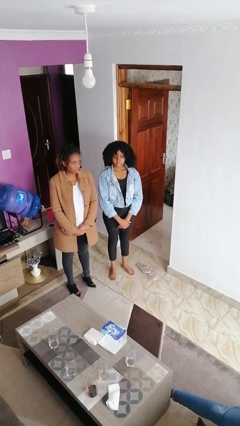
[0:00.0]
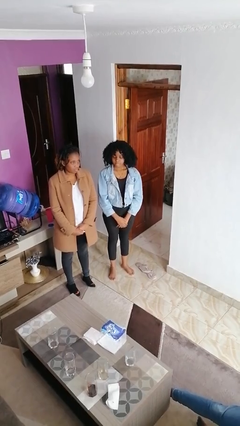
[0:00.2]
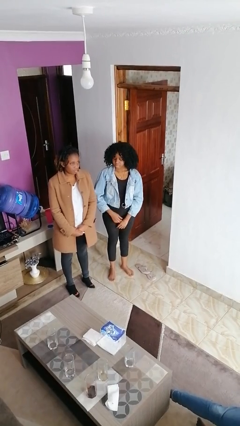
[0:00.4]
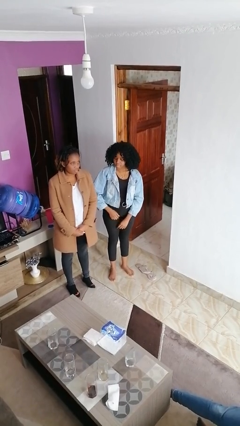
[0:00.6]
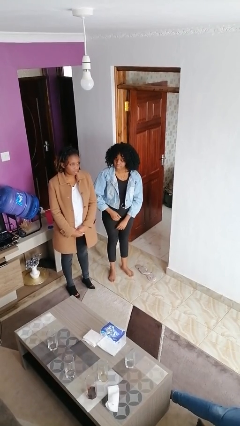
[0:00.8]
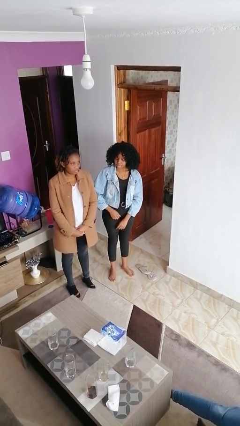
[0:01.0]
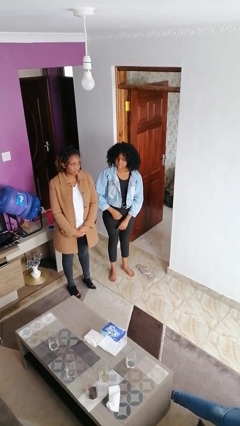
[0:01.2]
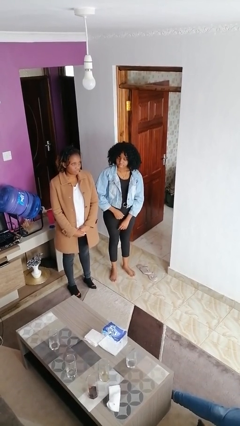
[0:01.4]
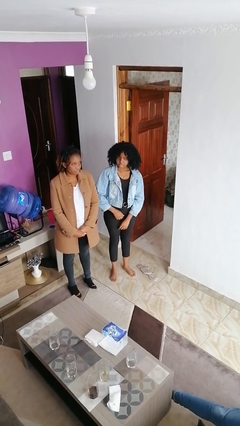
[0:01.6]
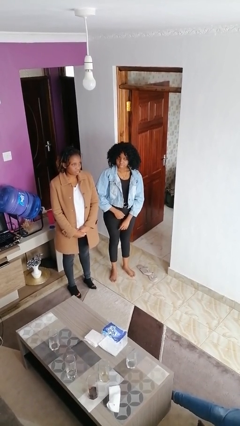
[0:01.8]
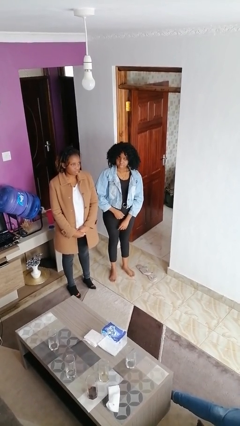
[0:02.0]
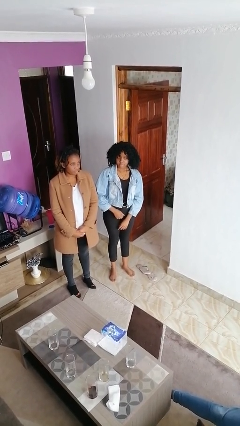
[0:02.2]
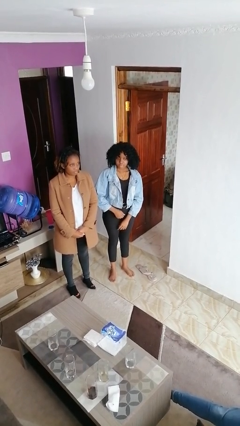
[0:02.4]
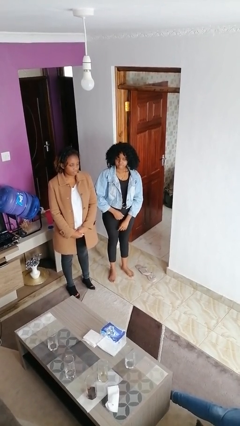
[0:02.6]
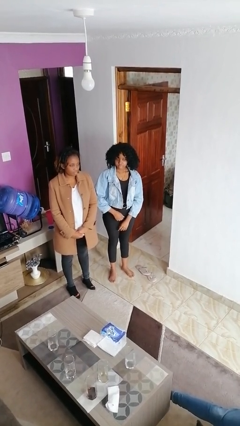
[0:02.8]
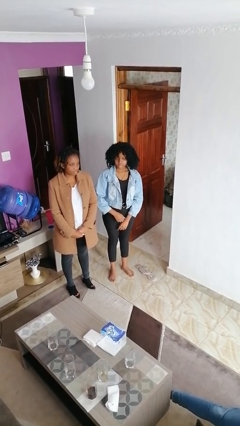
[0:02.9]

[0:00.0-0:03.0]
person nudges person with elbow

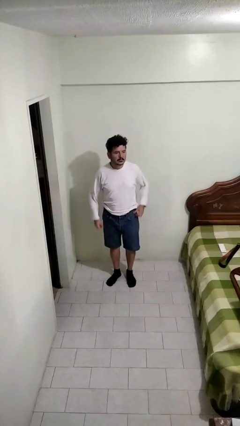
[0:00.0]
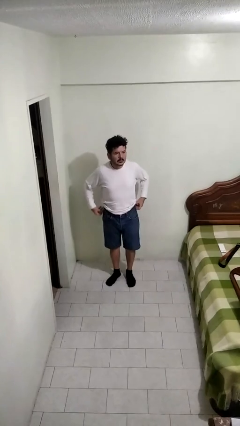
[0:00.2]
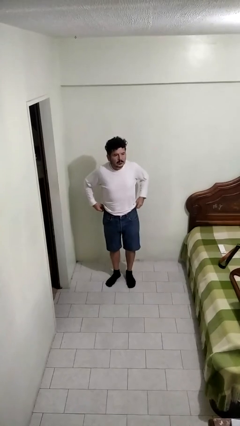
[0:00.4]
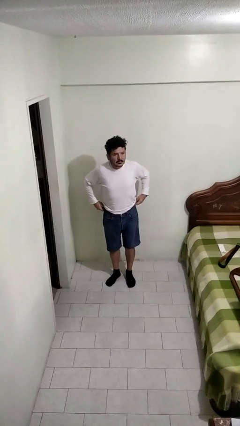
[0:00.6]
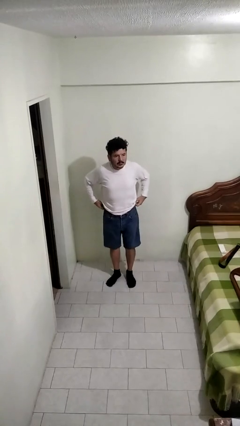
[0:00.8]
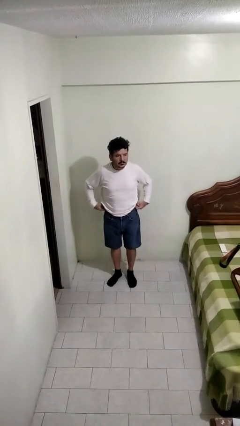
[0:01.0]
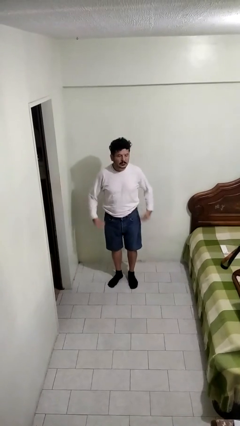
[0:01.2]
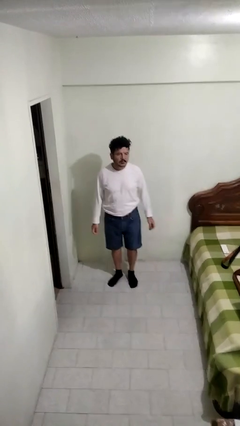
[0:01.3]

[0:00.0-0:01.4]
person hikes up pants

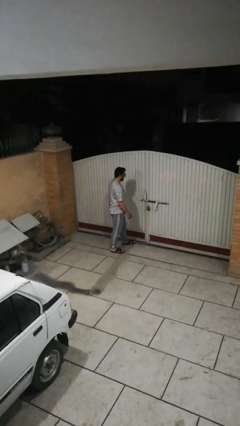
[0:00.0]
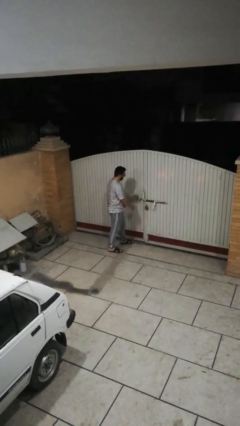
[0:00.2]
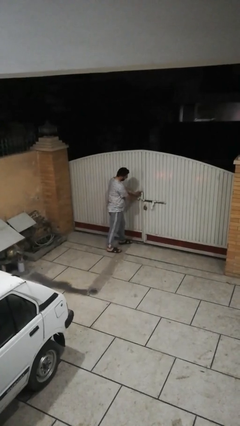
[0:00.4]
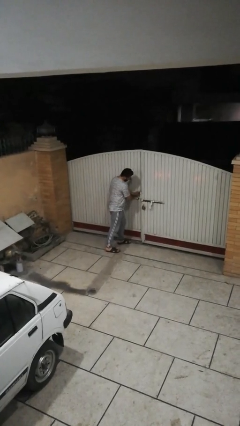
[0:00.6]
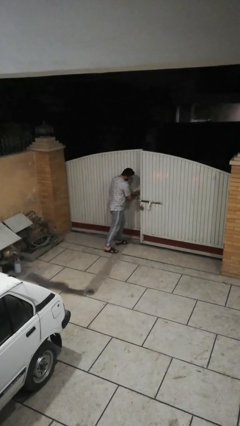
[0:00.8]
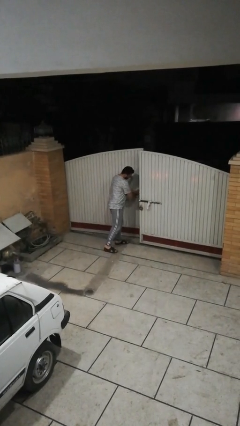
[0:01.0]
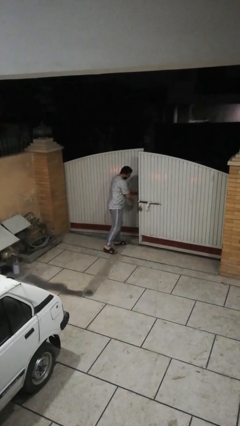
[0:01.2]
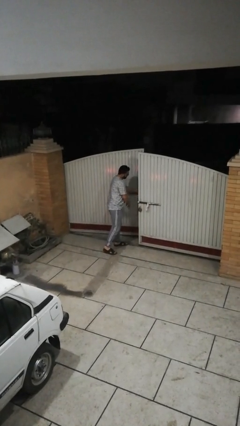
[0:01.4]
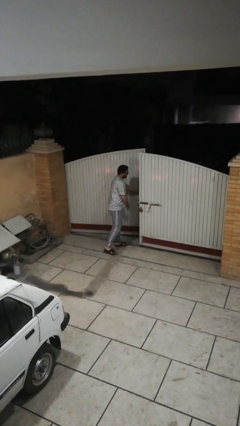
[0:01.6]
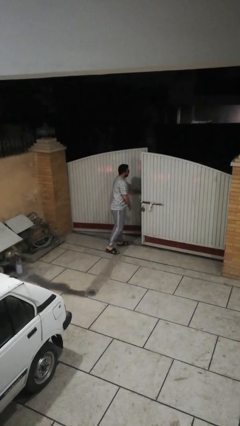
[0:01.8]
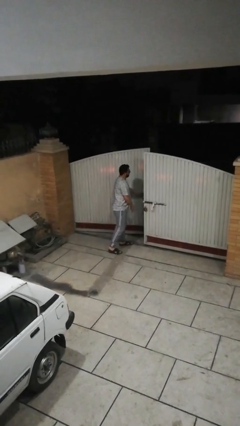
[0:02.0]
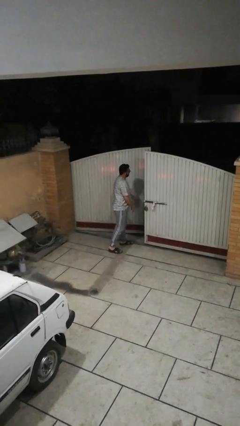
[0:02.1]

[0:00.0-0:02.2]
person opens facility door

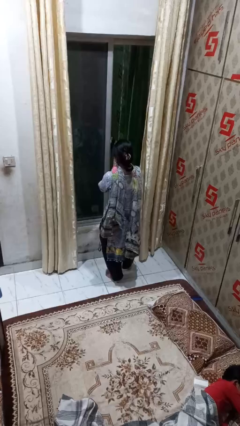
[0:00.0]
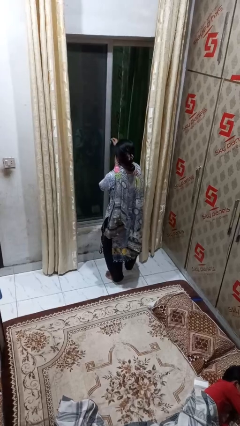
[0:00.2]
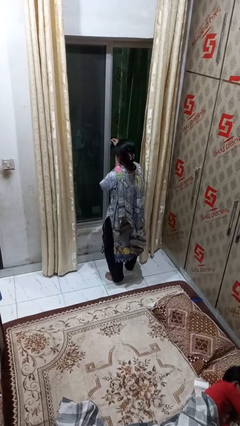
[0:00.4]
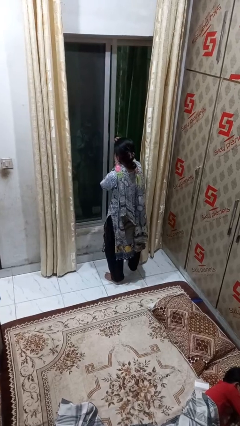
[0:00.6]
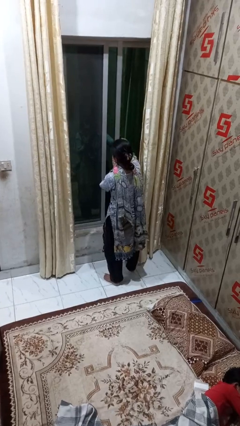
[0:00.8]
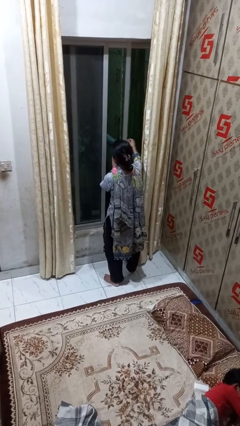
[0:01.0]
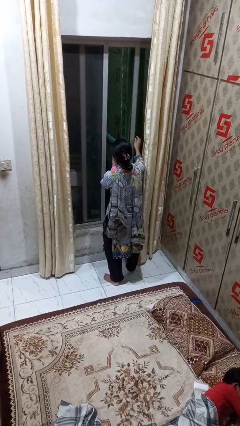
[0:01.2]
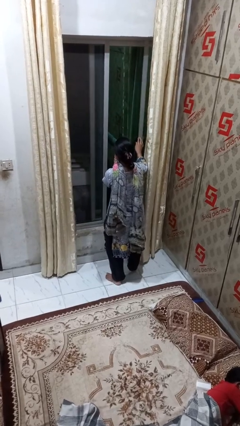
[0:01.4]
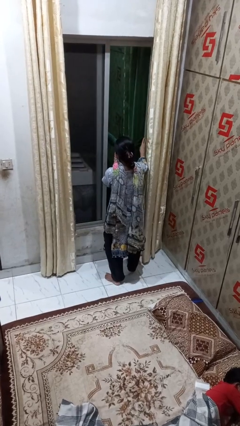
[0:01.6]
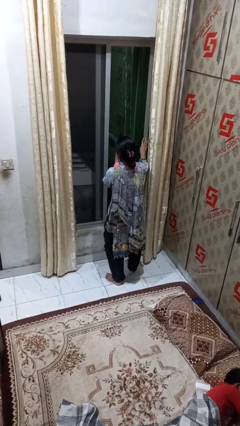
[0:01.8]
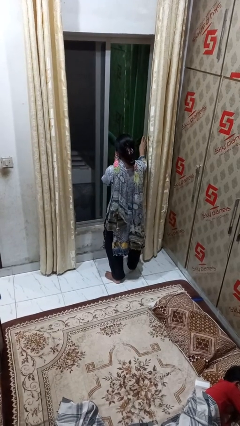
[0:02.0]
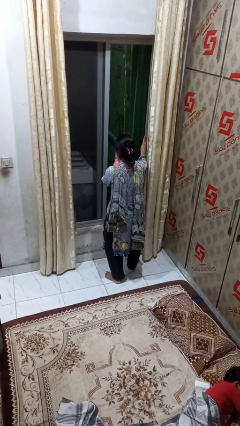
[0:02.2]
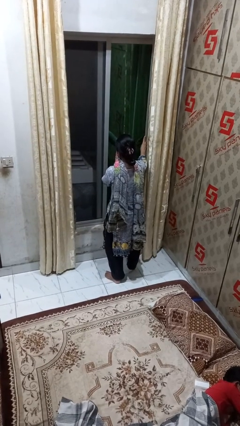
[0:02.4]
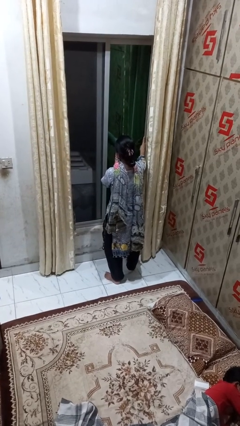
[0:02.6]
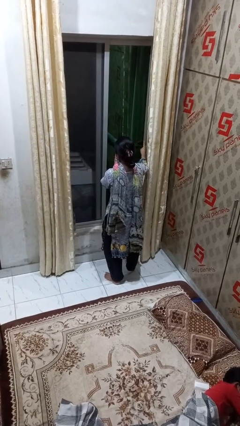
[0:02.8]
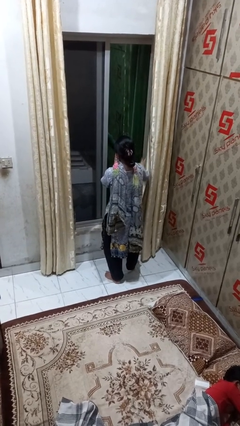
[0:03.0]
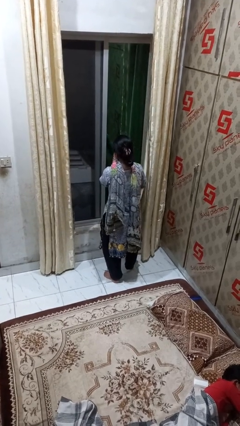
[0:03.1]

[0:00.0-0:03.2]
person opens home window

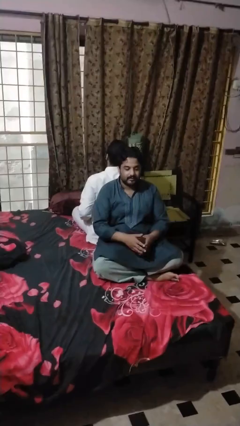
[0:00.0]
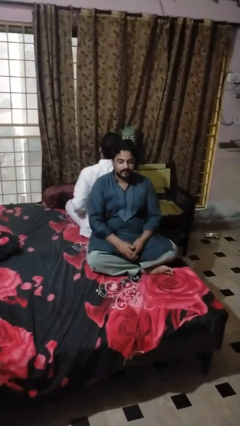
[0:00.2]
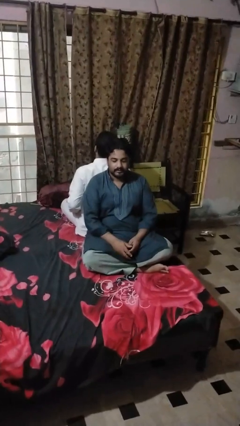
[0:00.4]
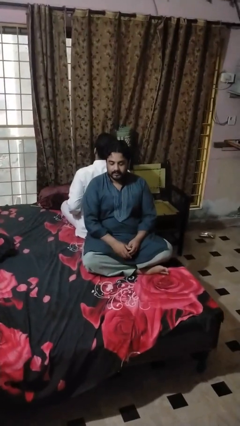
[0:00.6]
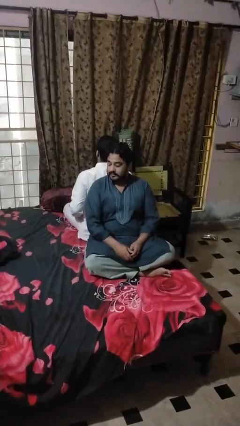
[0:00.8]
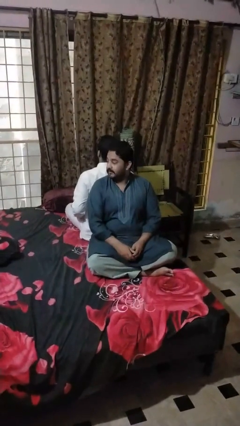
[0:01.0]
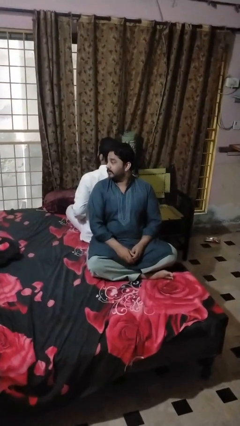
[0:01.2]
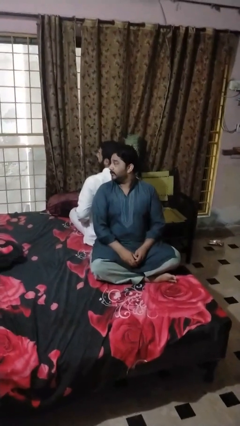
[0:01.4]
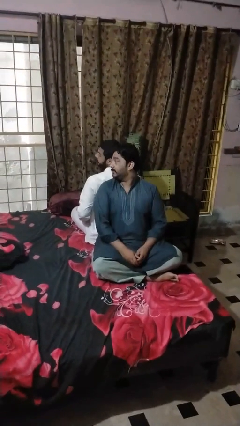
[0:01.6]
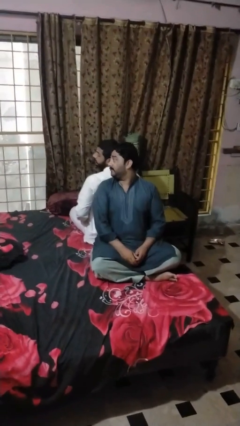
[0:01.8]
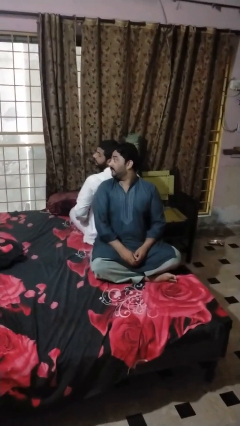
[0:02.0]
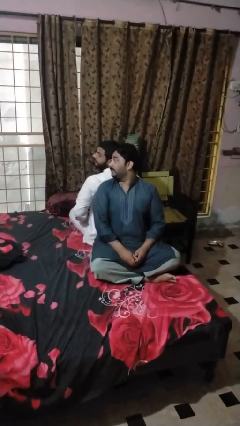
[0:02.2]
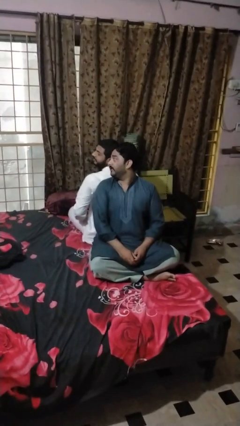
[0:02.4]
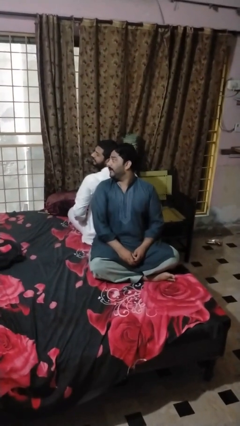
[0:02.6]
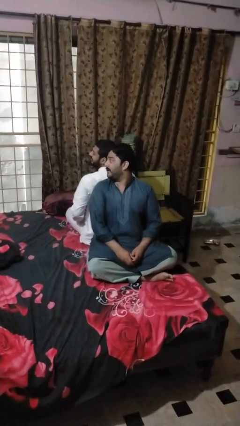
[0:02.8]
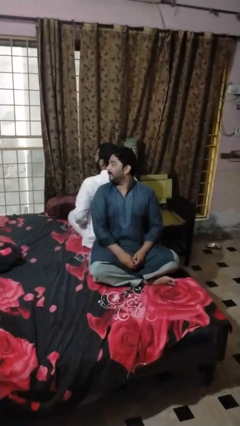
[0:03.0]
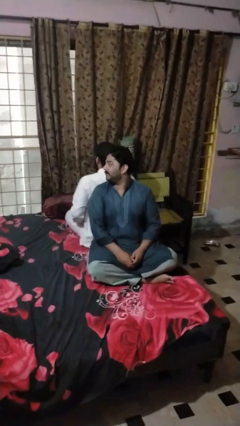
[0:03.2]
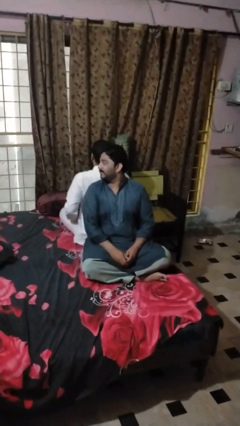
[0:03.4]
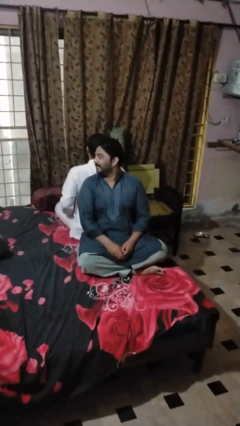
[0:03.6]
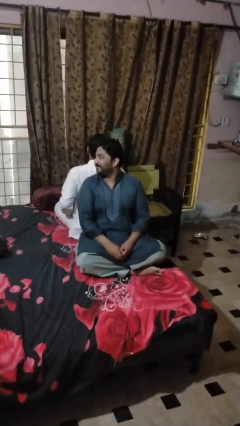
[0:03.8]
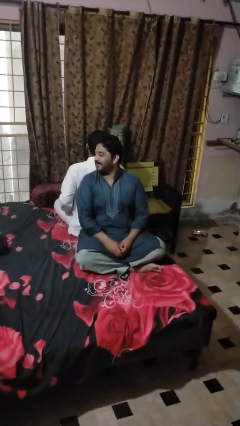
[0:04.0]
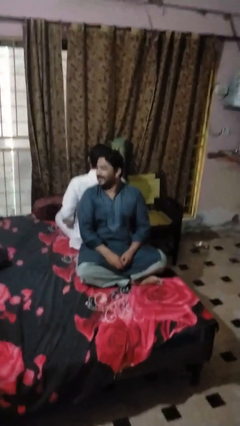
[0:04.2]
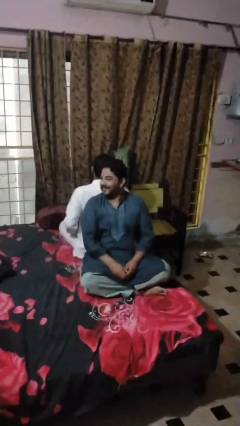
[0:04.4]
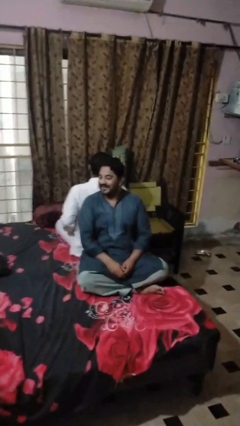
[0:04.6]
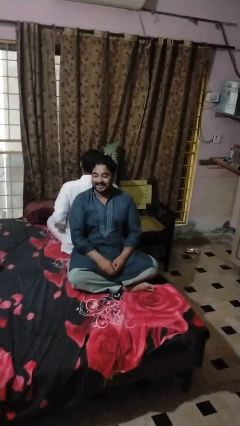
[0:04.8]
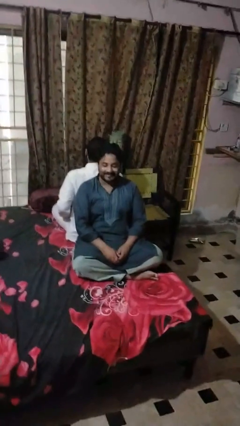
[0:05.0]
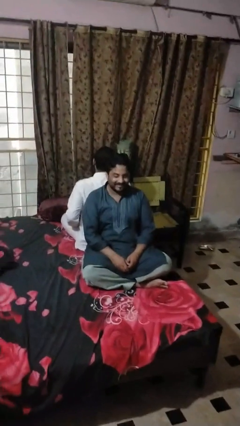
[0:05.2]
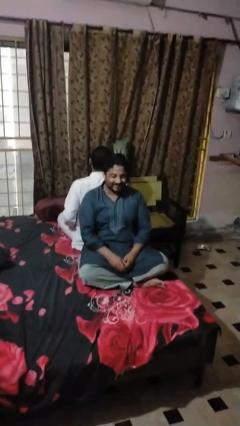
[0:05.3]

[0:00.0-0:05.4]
person looks over shoulder

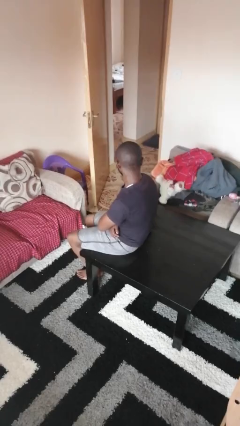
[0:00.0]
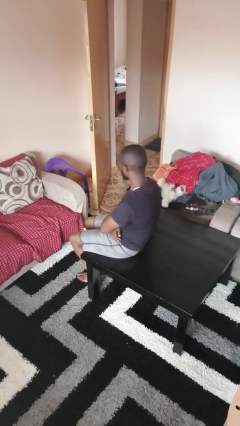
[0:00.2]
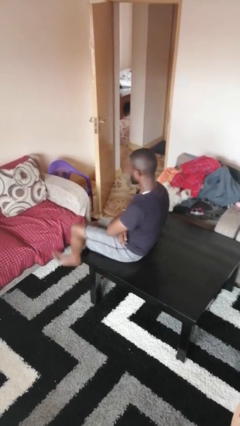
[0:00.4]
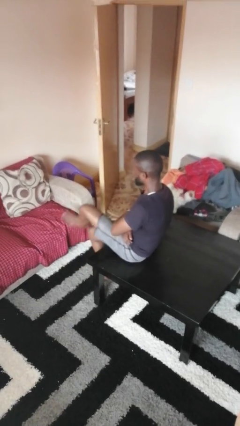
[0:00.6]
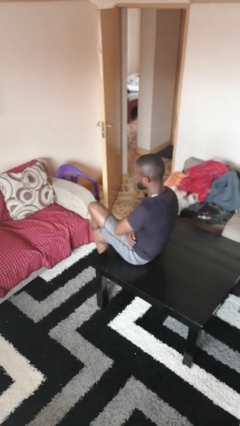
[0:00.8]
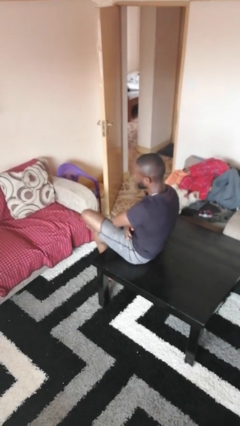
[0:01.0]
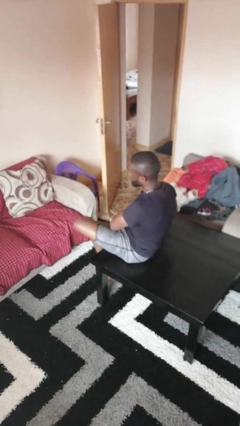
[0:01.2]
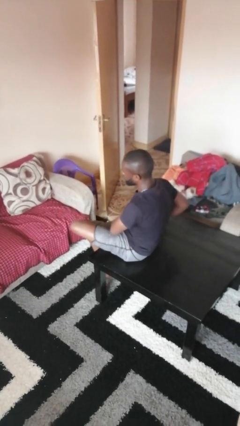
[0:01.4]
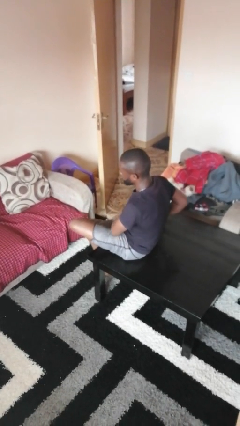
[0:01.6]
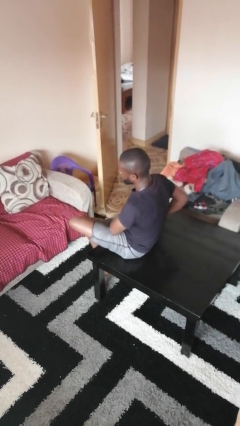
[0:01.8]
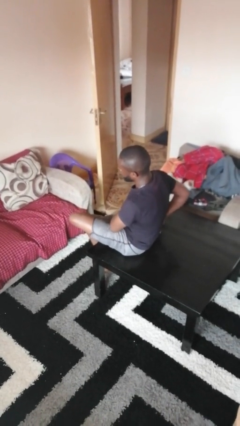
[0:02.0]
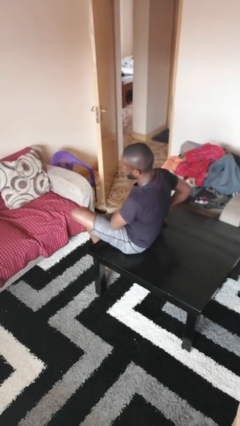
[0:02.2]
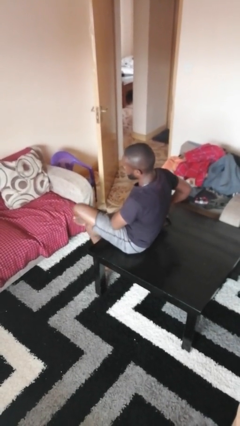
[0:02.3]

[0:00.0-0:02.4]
person crosses legs
